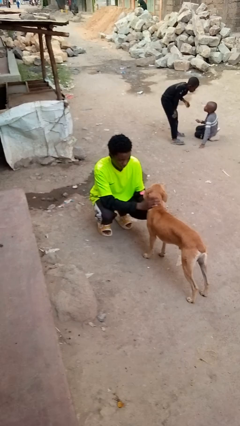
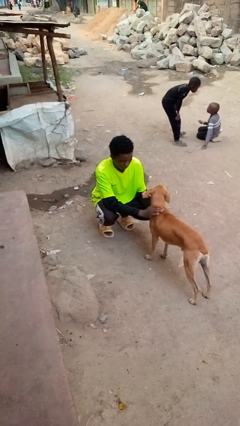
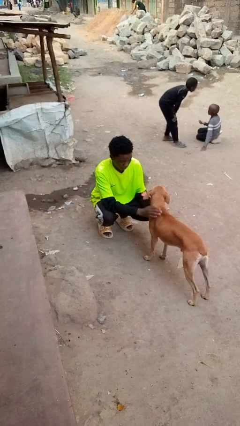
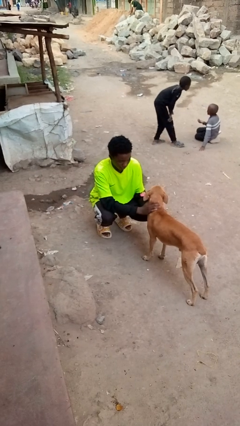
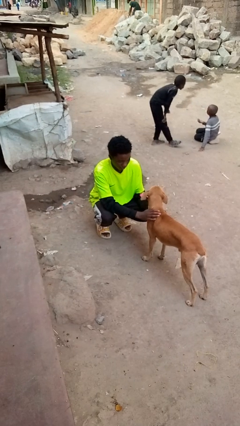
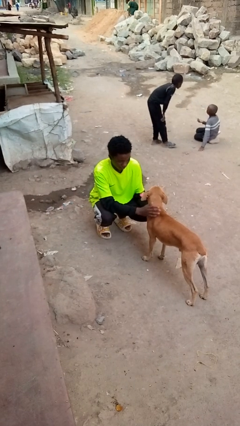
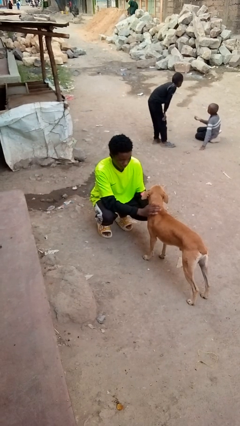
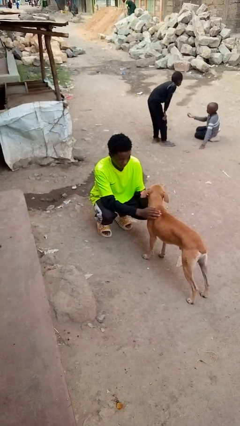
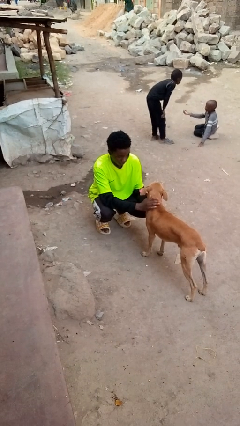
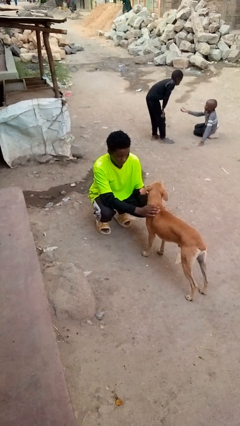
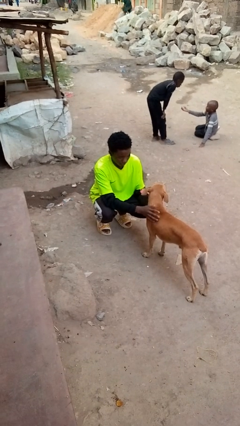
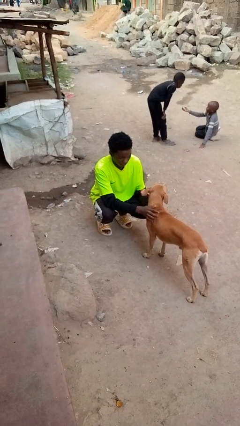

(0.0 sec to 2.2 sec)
person pets dog

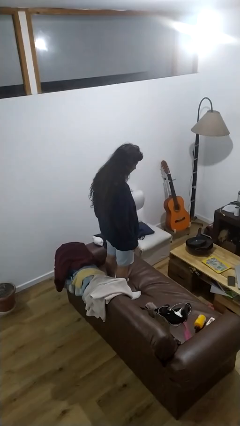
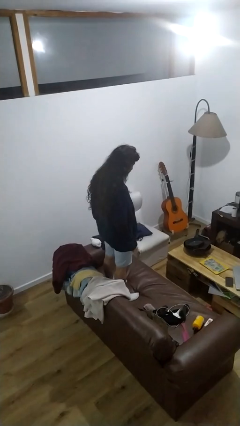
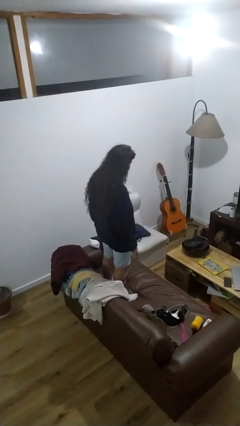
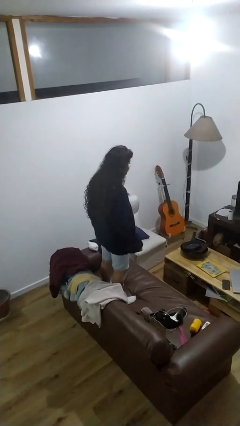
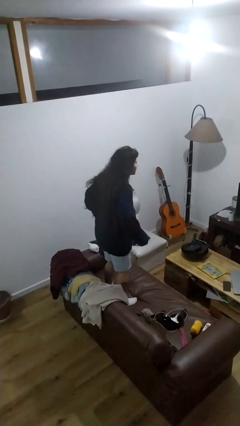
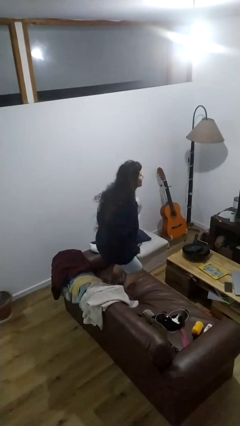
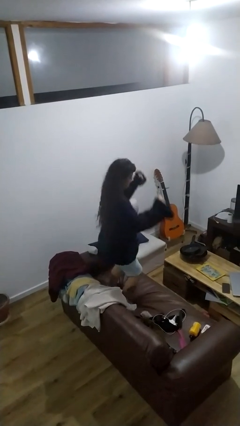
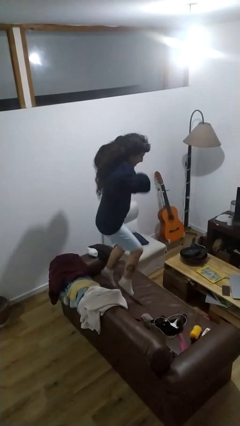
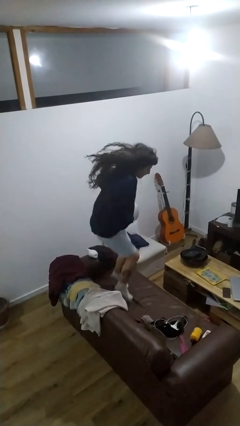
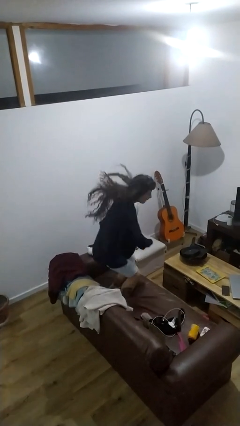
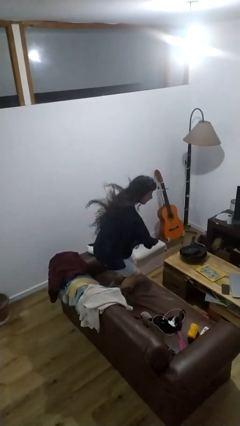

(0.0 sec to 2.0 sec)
person jumps on couch

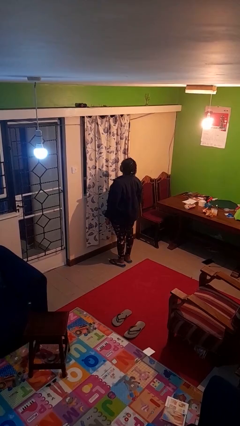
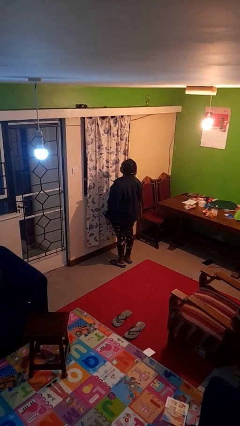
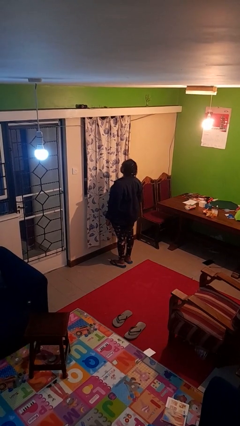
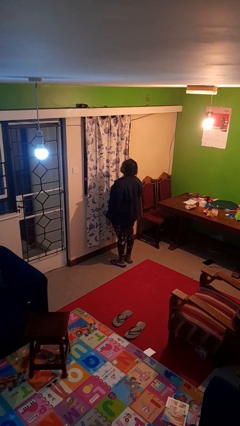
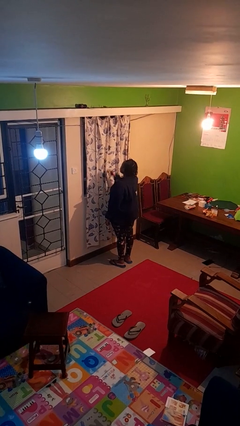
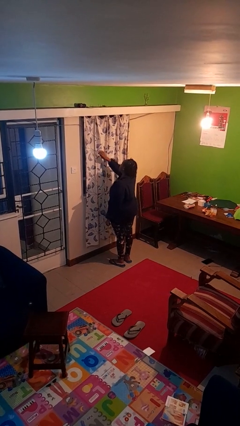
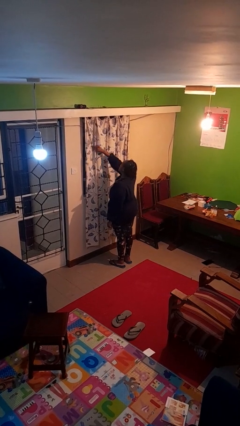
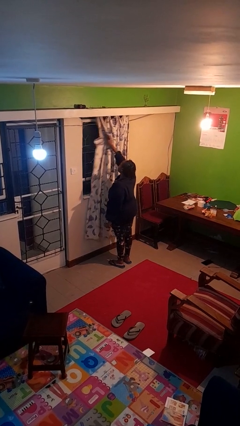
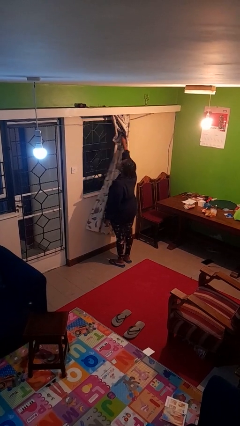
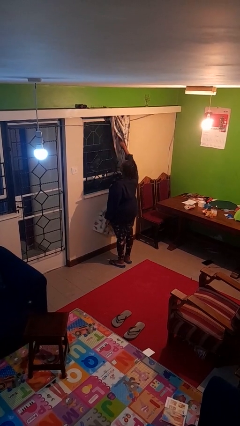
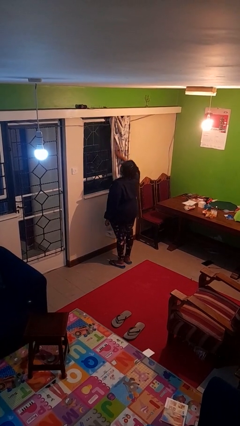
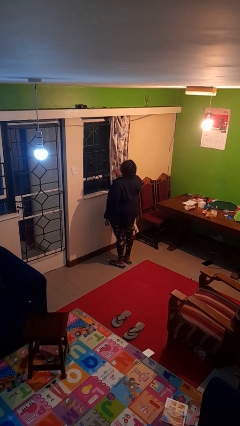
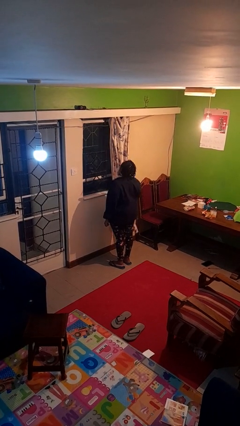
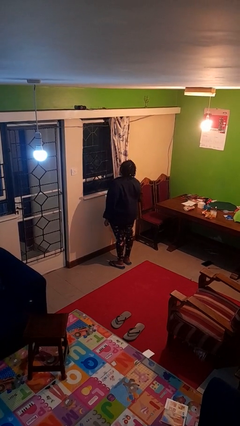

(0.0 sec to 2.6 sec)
person opens curtains

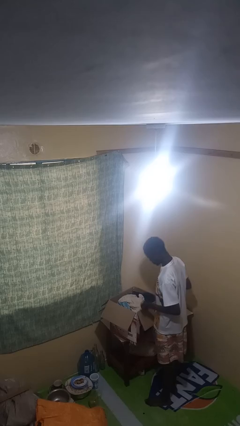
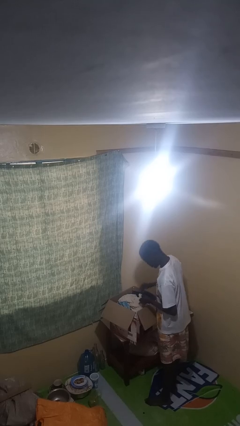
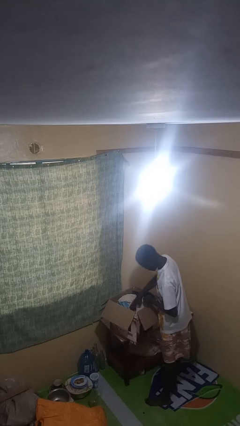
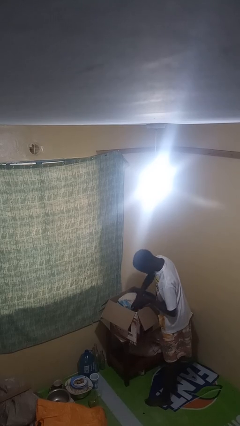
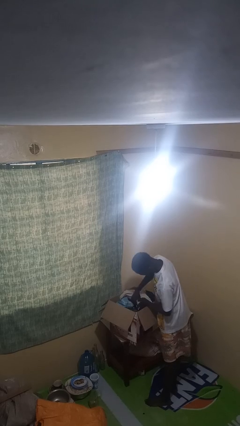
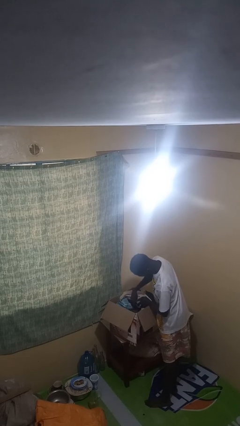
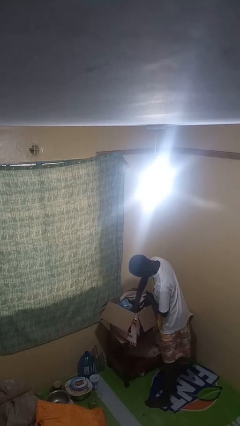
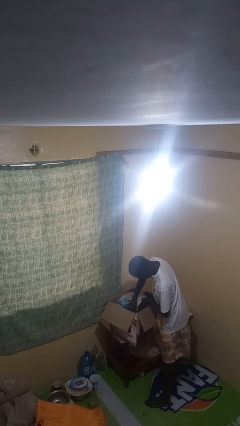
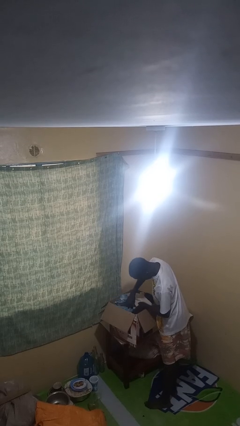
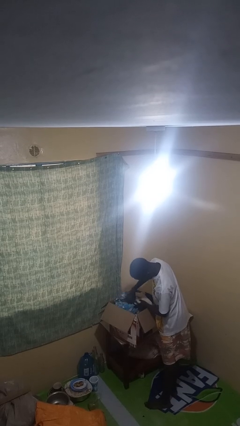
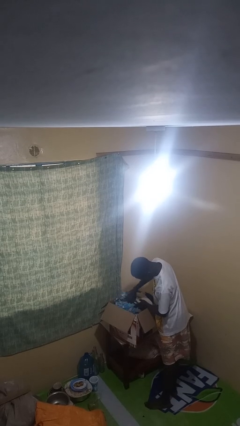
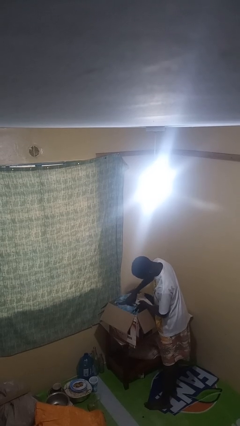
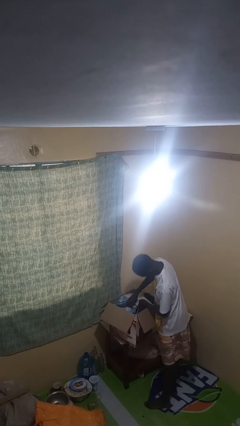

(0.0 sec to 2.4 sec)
person searches in box

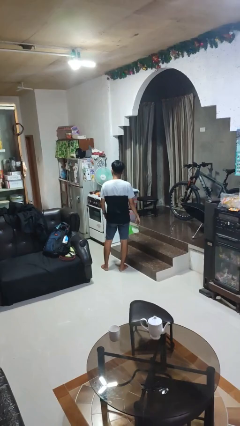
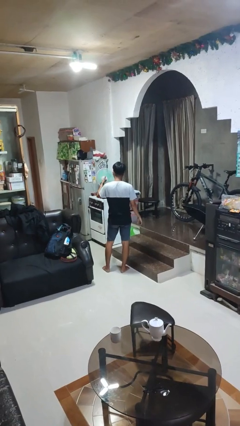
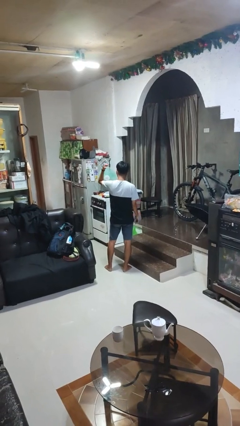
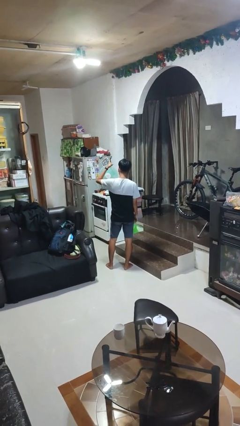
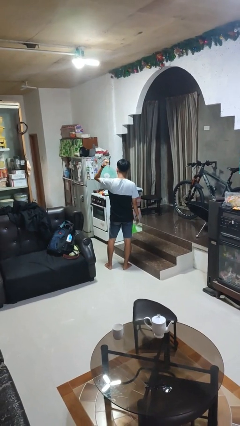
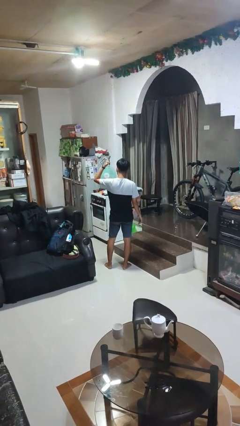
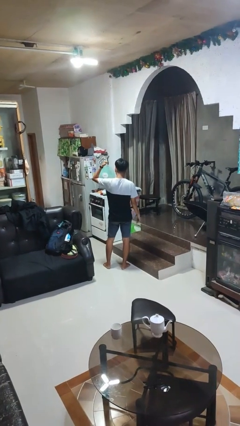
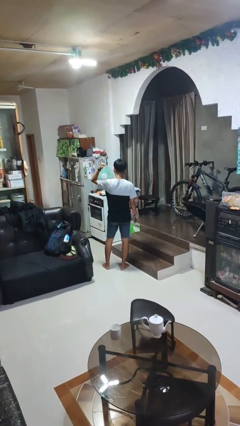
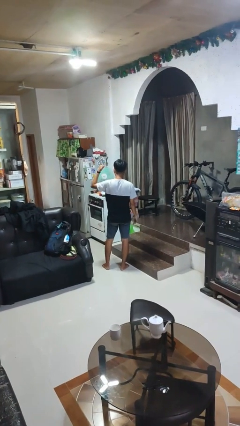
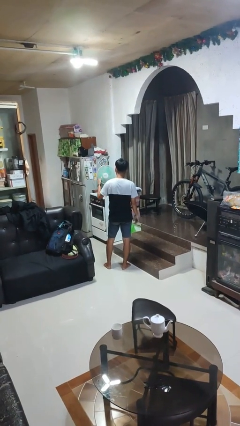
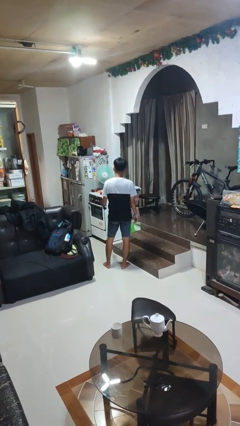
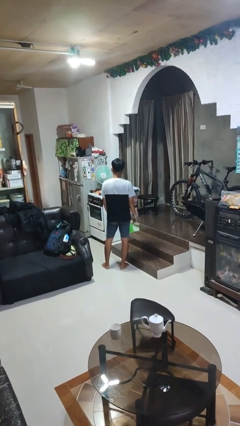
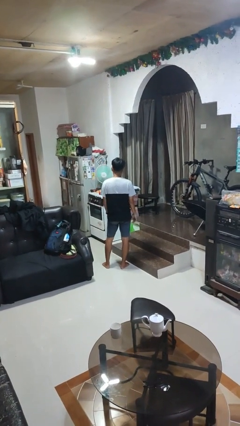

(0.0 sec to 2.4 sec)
person gestures behind me

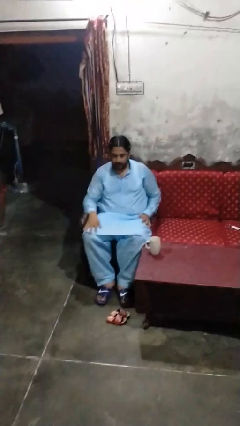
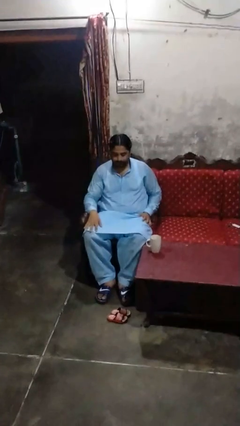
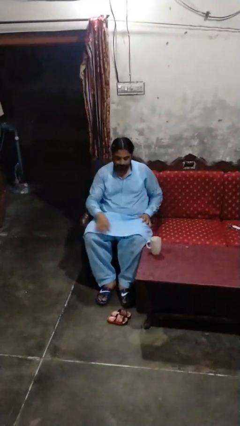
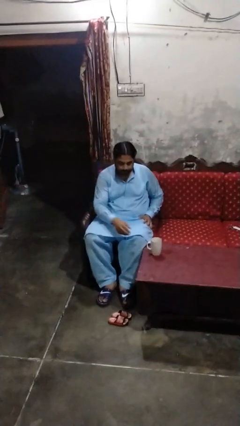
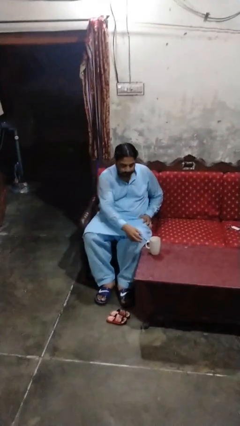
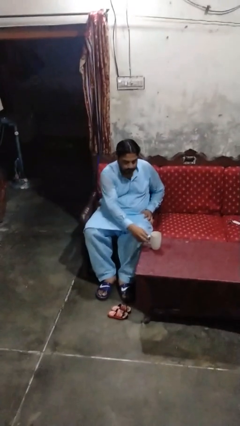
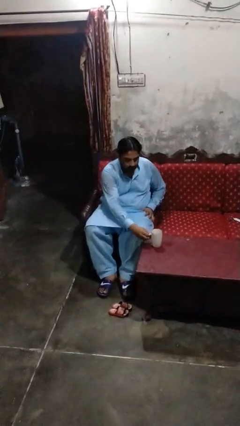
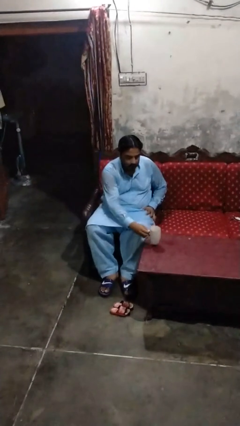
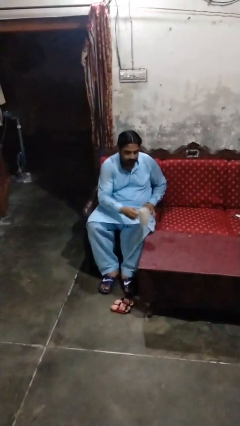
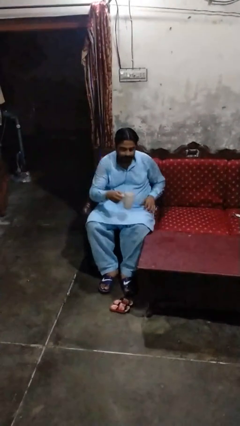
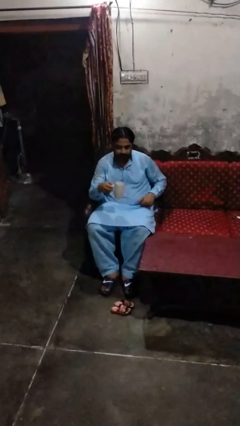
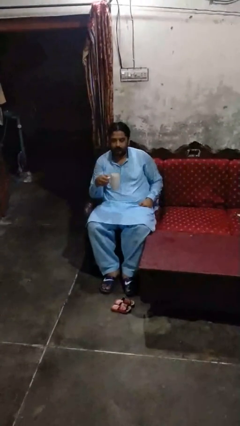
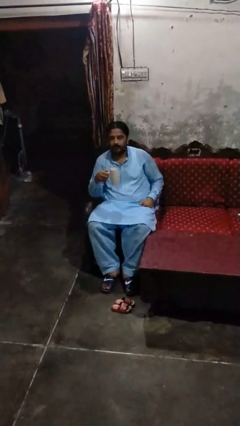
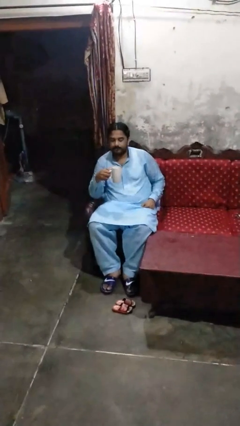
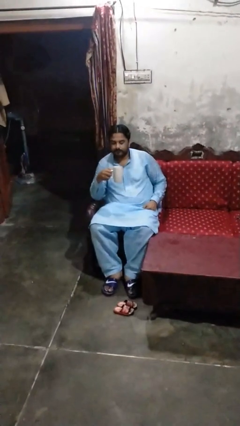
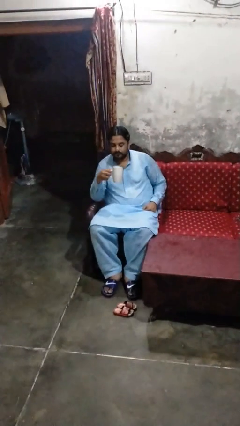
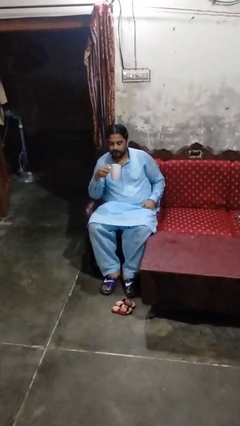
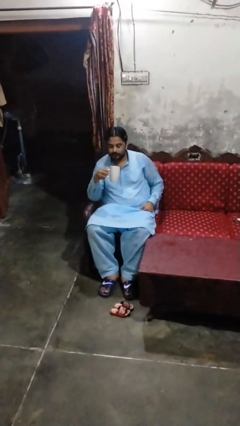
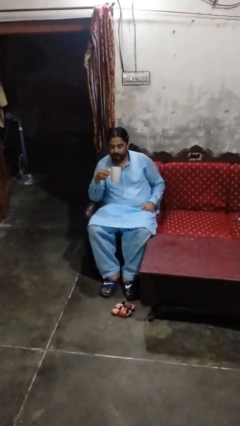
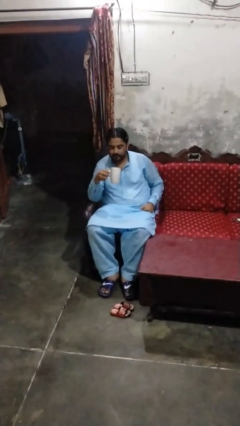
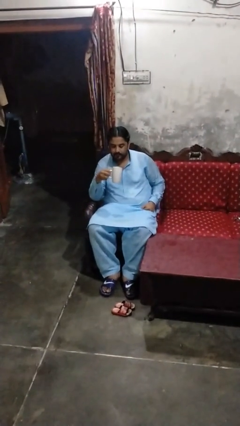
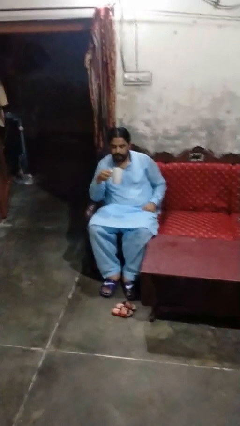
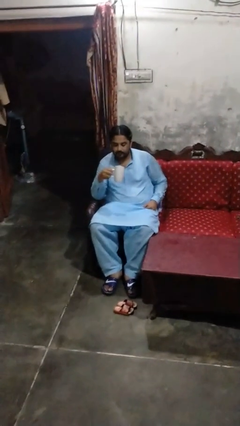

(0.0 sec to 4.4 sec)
person picks up object from table

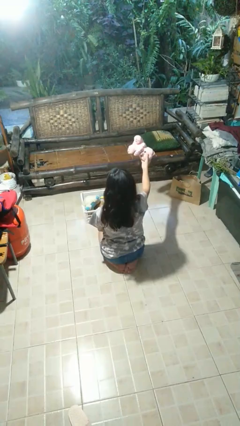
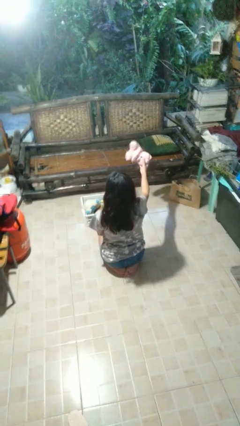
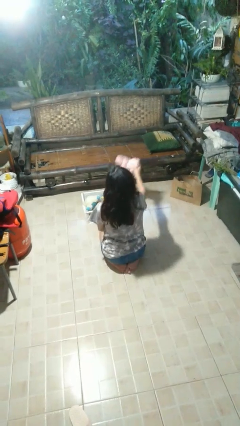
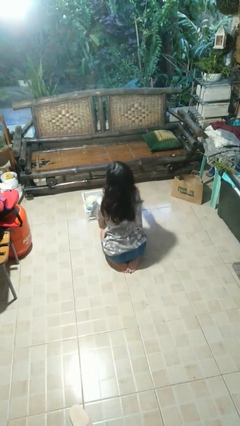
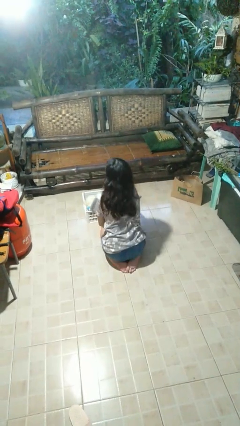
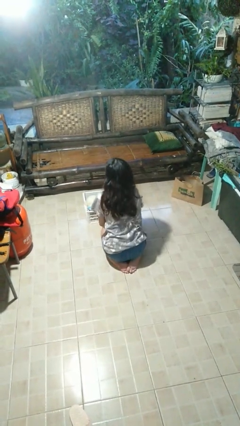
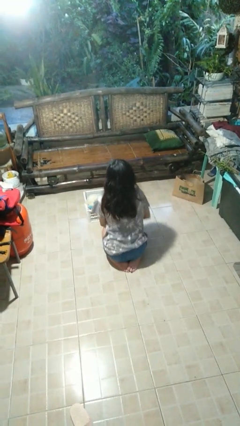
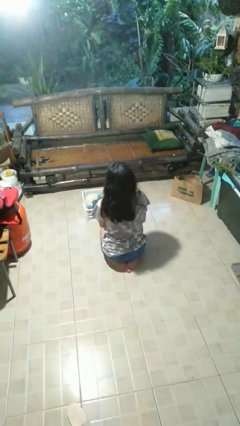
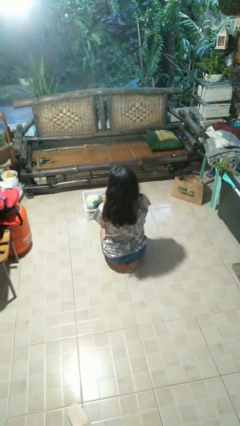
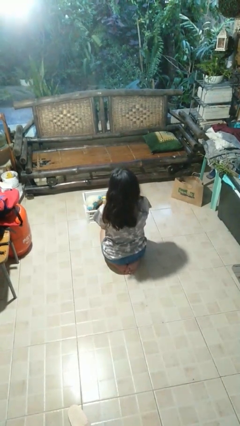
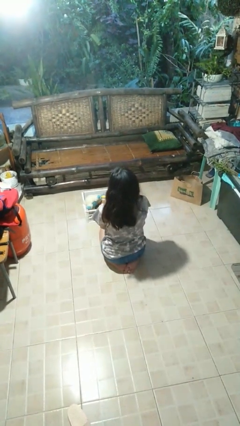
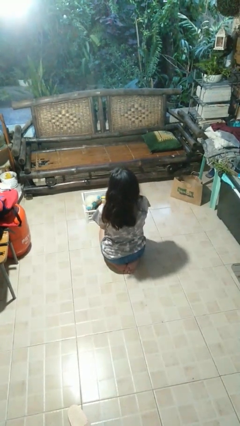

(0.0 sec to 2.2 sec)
person puts object into basket
